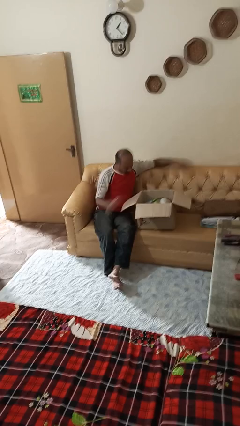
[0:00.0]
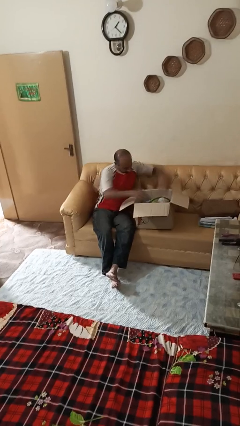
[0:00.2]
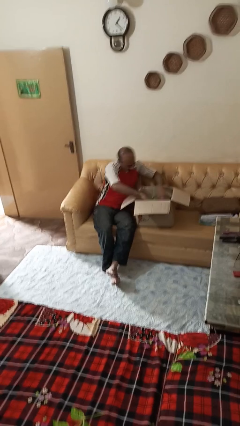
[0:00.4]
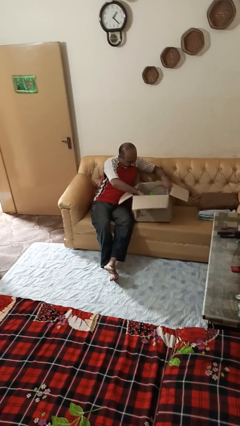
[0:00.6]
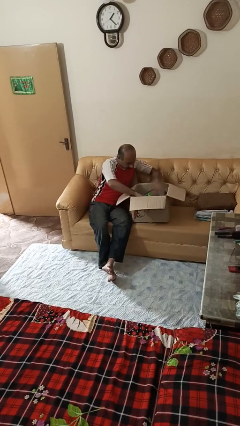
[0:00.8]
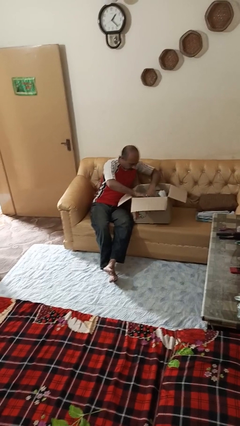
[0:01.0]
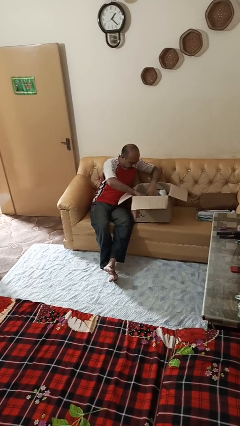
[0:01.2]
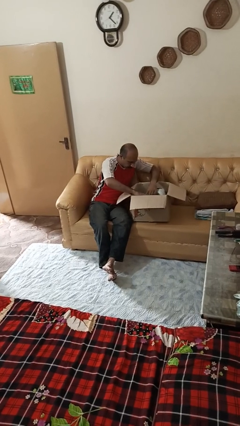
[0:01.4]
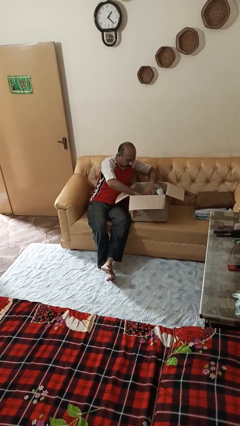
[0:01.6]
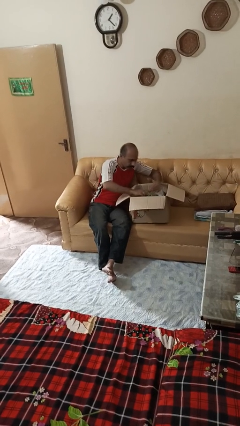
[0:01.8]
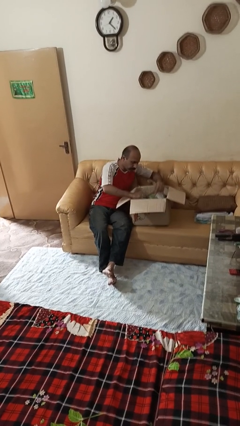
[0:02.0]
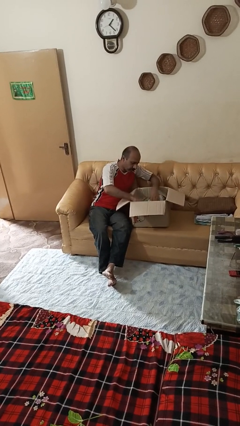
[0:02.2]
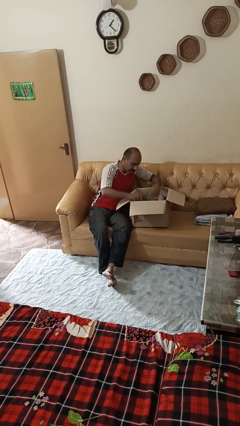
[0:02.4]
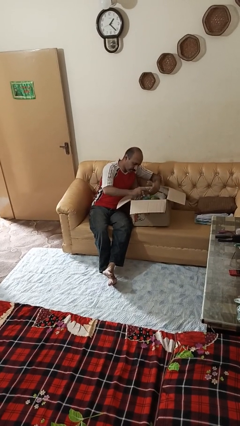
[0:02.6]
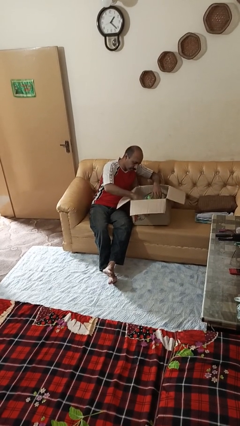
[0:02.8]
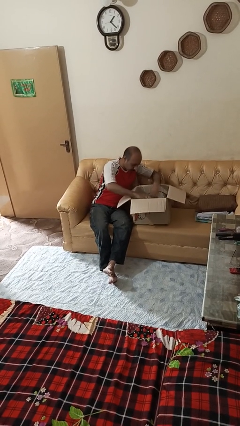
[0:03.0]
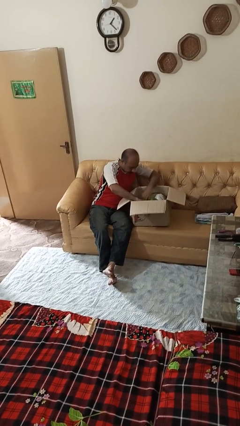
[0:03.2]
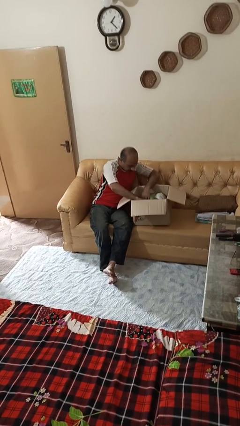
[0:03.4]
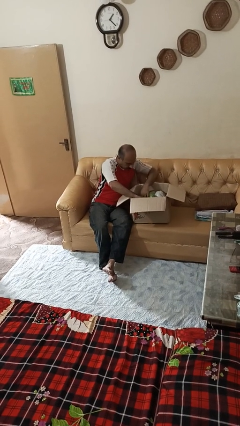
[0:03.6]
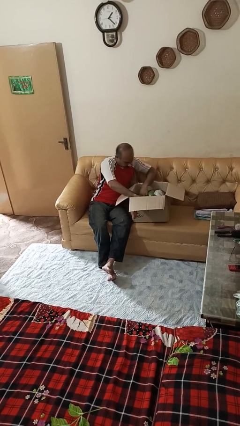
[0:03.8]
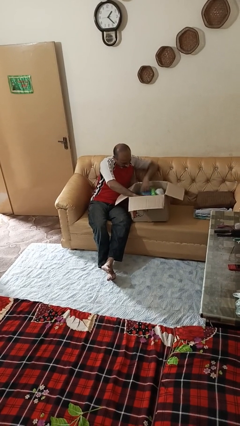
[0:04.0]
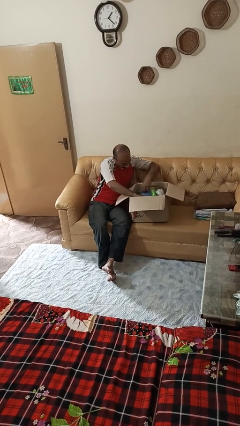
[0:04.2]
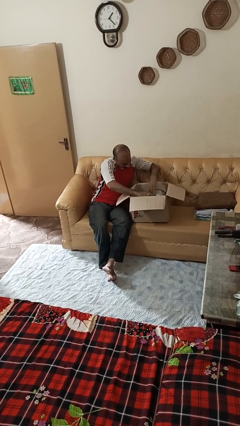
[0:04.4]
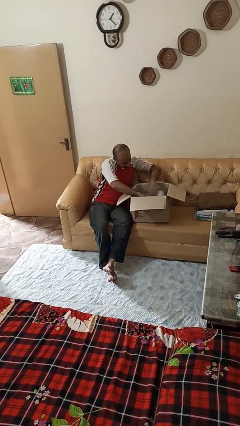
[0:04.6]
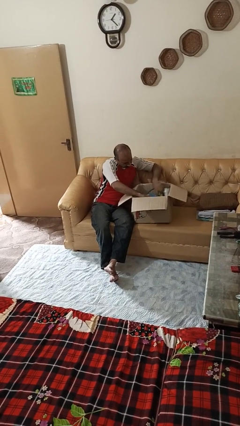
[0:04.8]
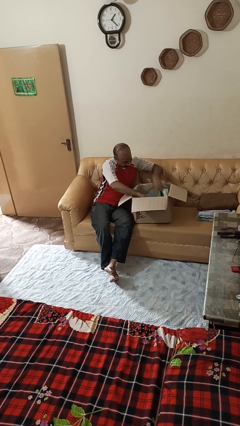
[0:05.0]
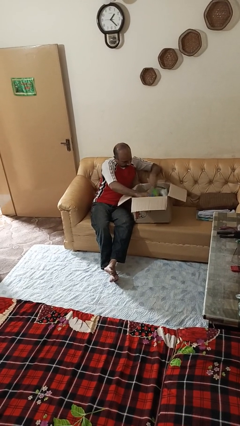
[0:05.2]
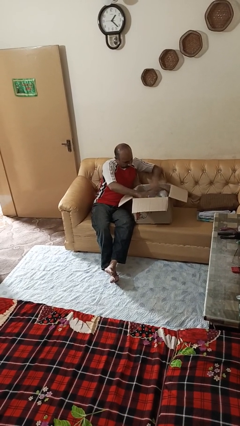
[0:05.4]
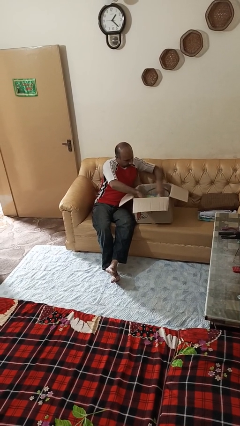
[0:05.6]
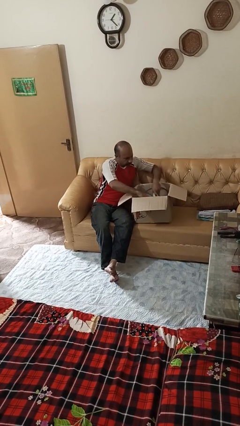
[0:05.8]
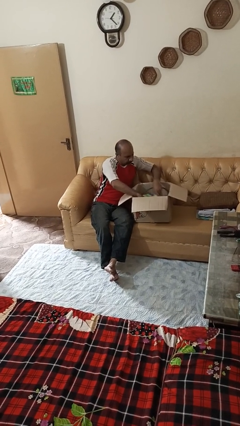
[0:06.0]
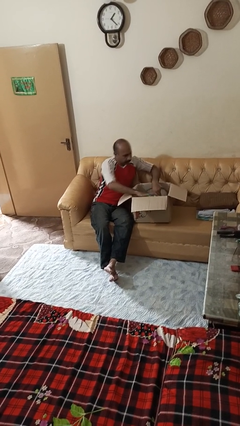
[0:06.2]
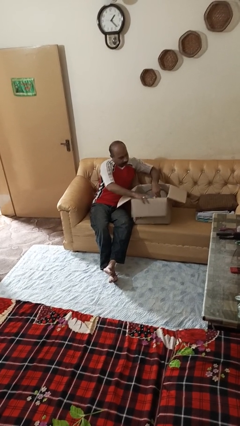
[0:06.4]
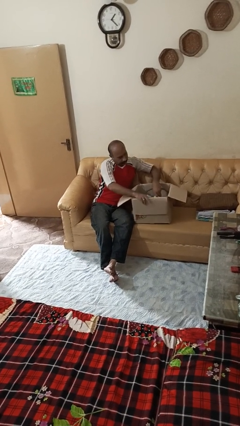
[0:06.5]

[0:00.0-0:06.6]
person searches in box

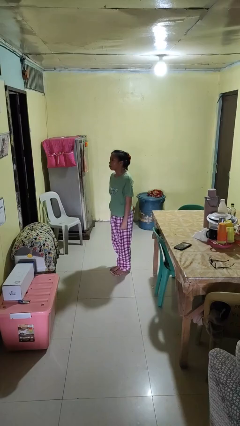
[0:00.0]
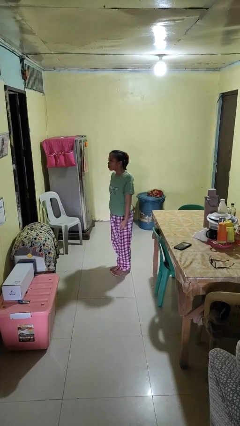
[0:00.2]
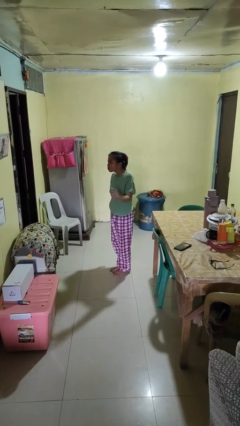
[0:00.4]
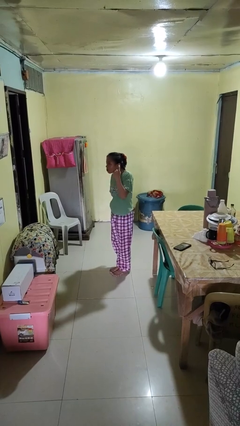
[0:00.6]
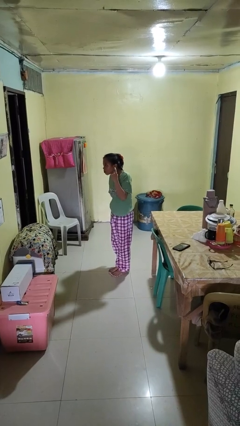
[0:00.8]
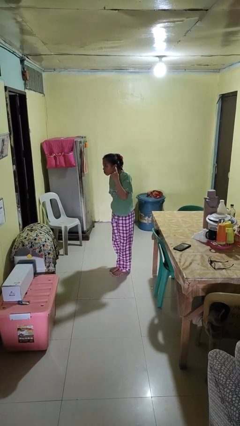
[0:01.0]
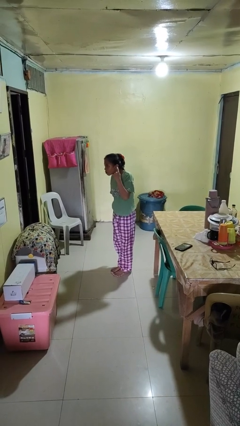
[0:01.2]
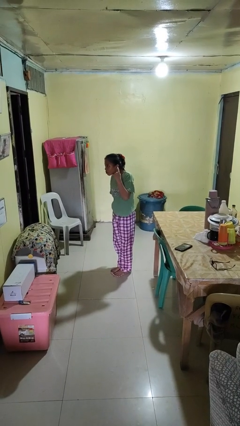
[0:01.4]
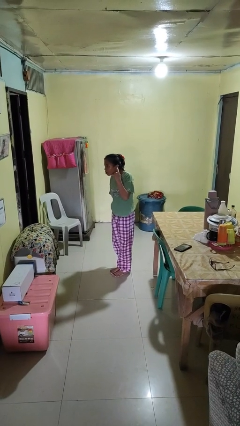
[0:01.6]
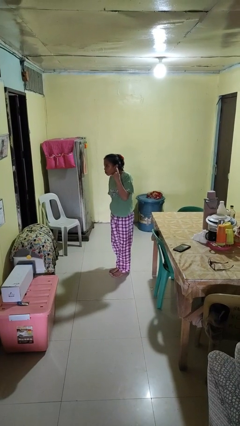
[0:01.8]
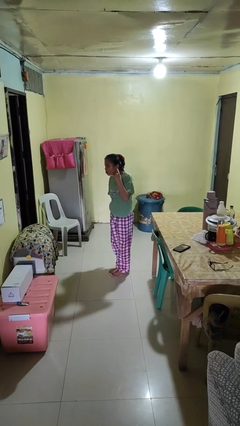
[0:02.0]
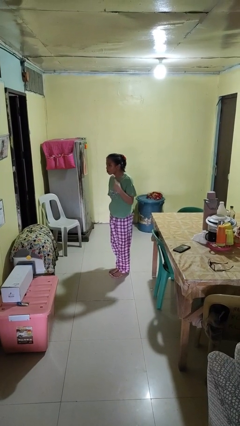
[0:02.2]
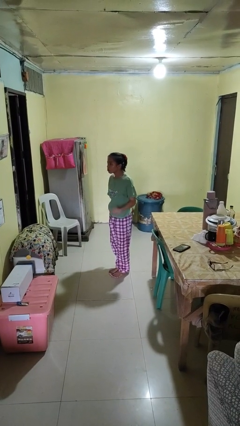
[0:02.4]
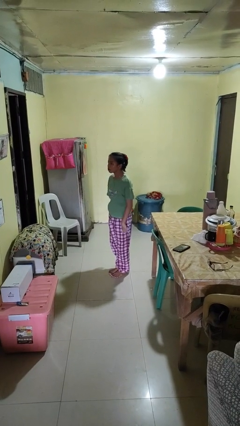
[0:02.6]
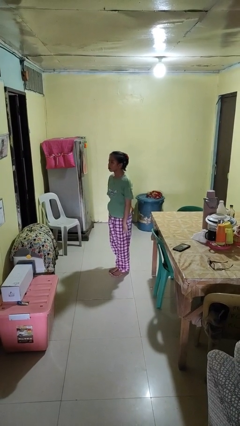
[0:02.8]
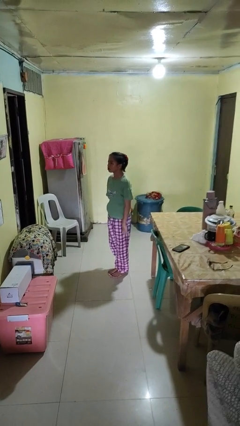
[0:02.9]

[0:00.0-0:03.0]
person gestures listen closely

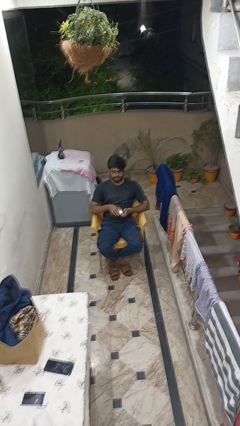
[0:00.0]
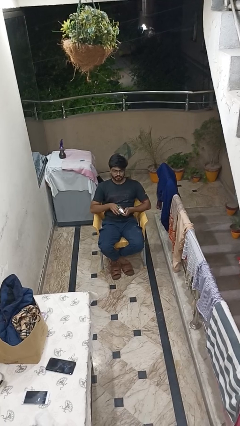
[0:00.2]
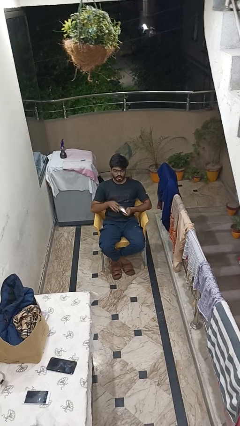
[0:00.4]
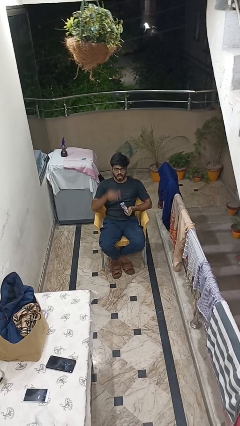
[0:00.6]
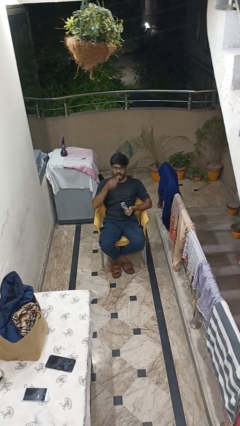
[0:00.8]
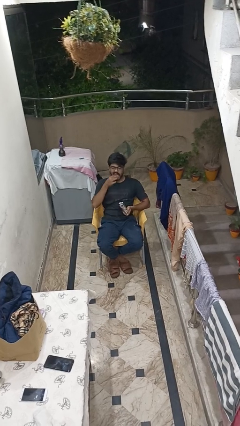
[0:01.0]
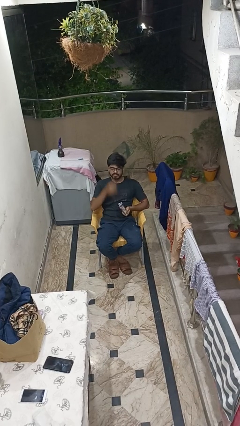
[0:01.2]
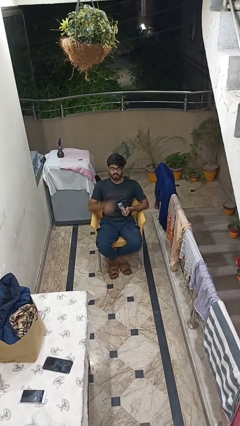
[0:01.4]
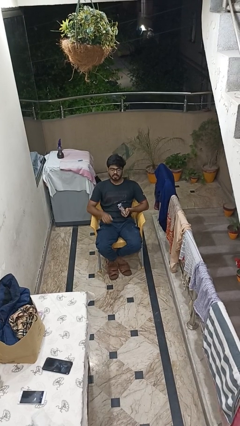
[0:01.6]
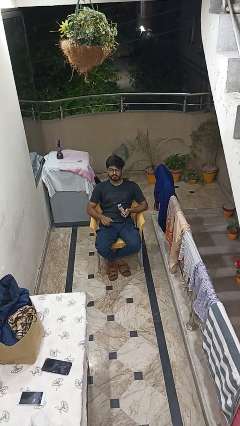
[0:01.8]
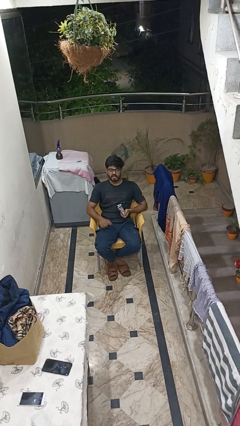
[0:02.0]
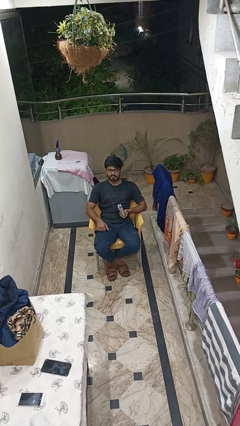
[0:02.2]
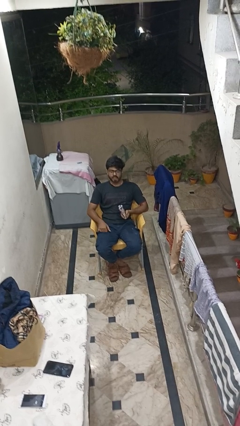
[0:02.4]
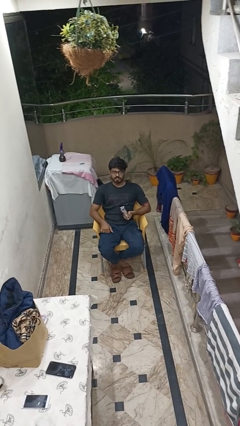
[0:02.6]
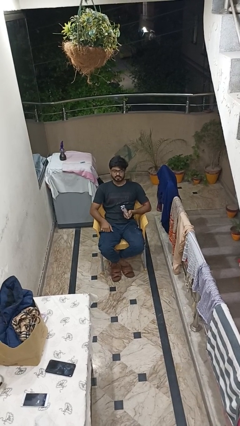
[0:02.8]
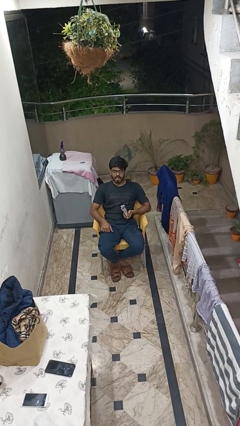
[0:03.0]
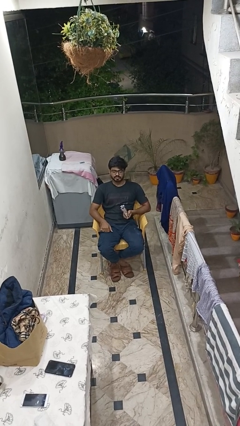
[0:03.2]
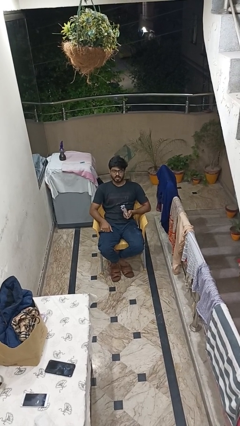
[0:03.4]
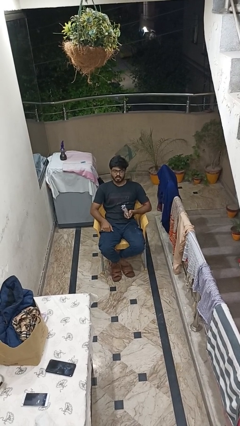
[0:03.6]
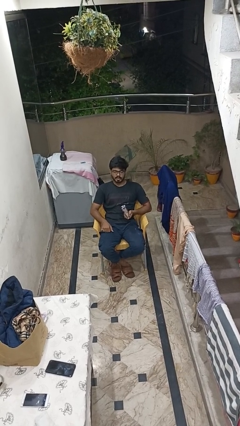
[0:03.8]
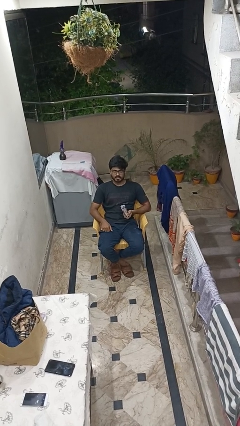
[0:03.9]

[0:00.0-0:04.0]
person eats snack from bag

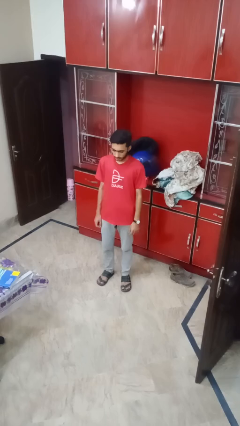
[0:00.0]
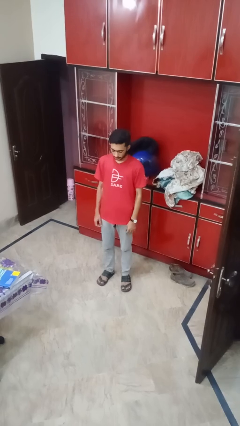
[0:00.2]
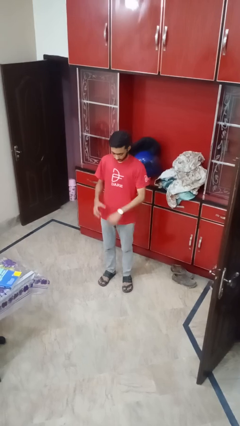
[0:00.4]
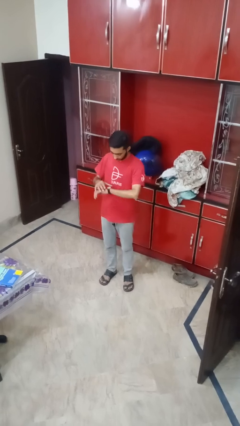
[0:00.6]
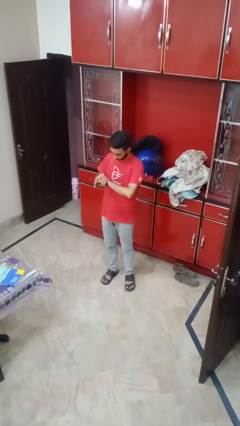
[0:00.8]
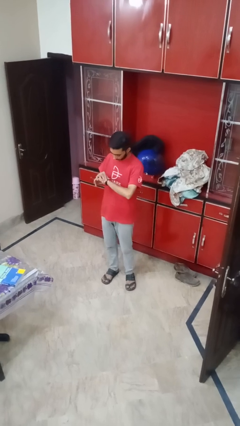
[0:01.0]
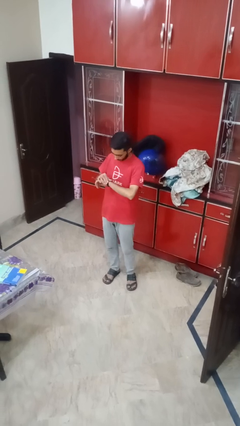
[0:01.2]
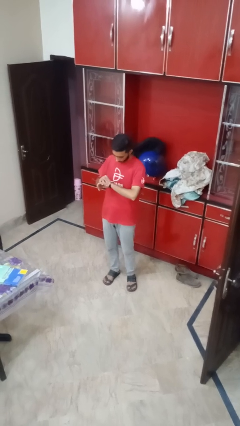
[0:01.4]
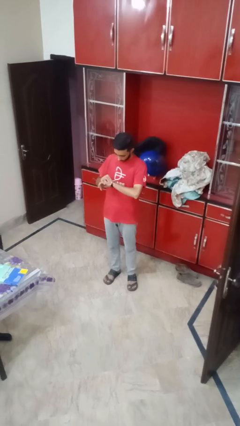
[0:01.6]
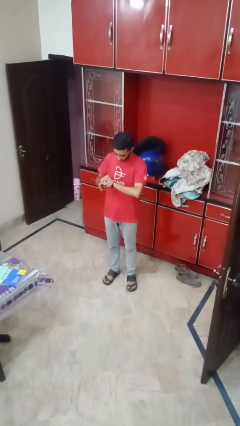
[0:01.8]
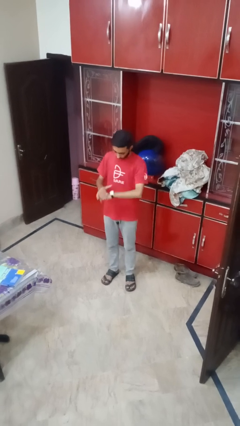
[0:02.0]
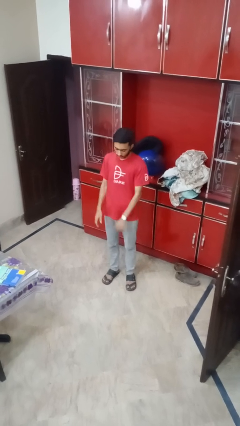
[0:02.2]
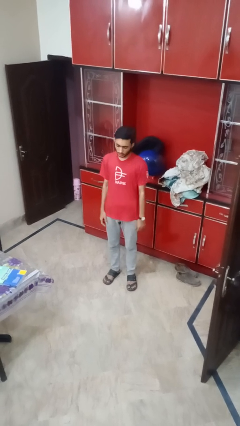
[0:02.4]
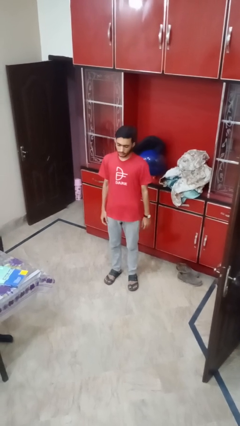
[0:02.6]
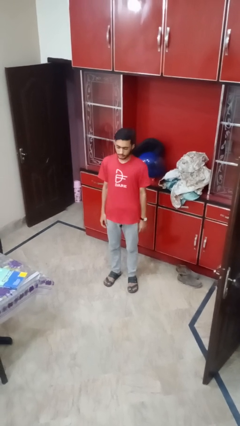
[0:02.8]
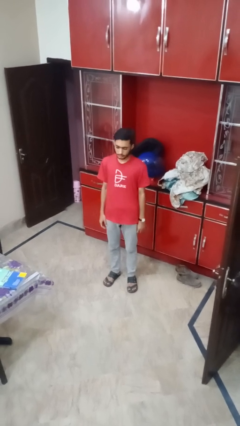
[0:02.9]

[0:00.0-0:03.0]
person looks at wristwatch

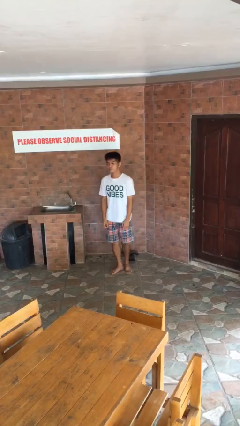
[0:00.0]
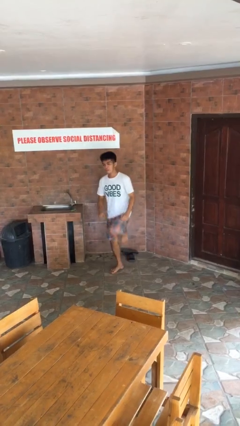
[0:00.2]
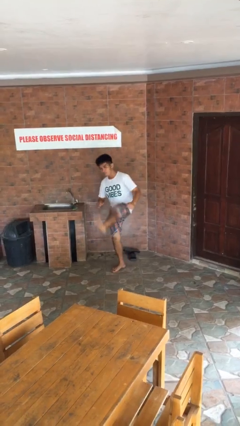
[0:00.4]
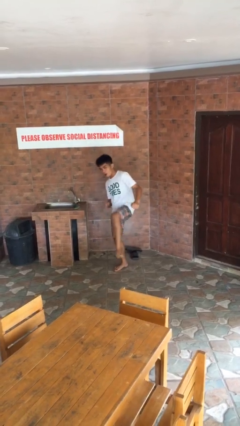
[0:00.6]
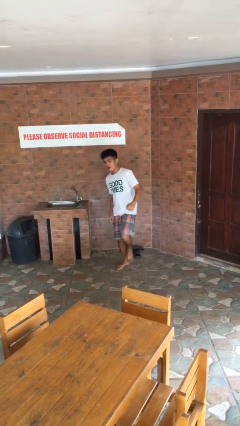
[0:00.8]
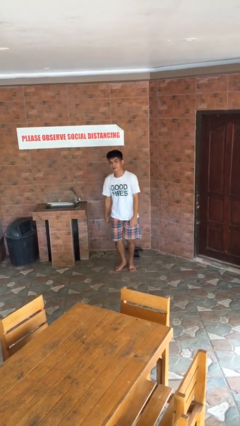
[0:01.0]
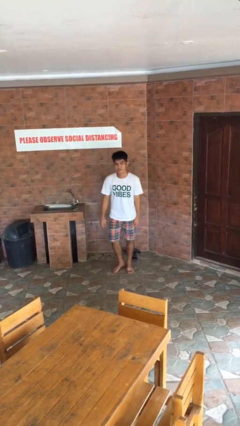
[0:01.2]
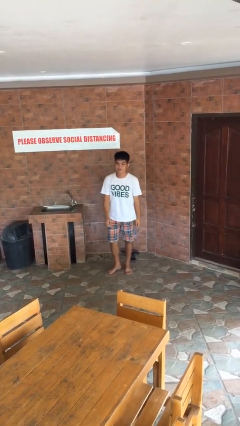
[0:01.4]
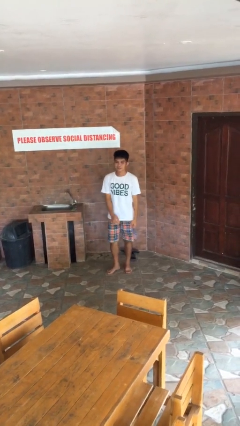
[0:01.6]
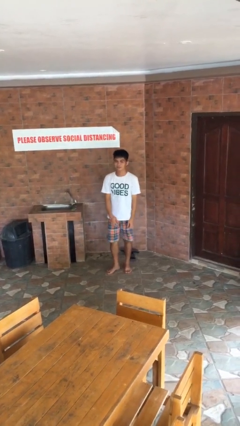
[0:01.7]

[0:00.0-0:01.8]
person karate kicks
